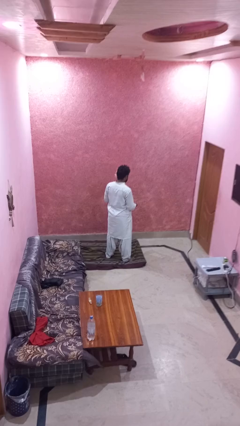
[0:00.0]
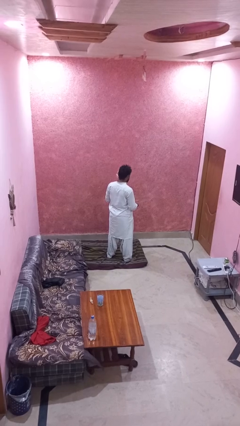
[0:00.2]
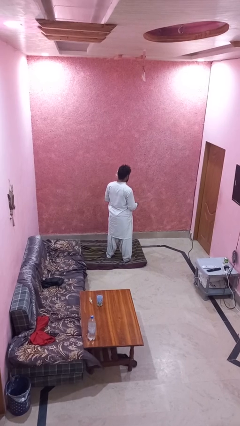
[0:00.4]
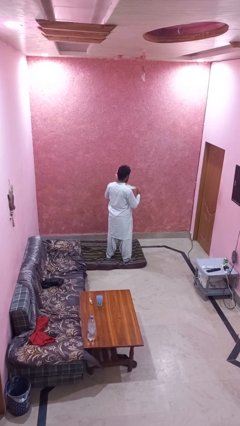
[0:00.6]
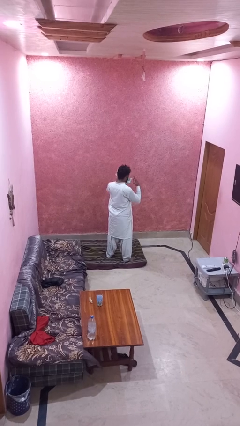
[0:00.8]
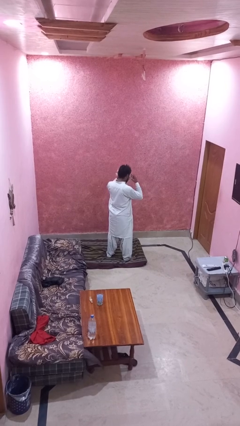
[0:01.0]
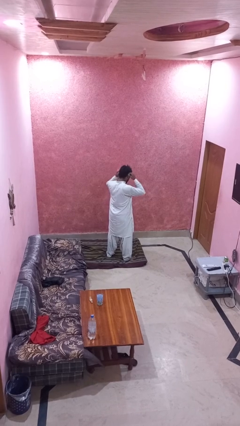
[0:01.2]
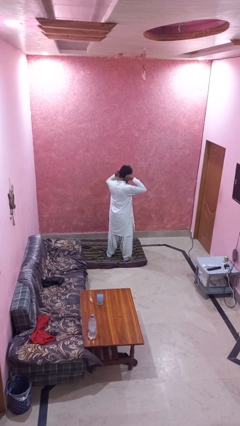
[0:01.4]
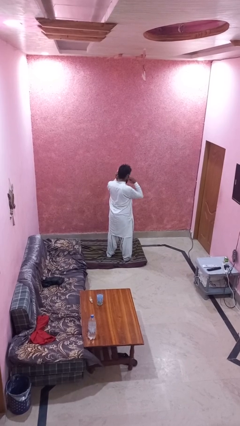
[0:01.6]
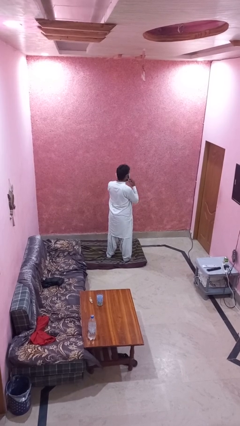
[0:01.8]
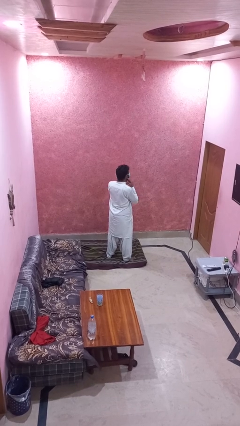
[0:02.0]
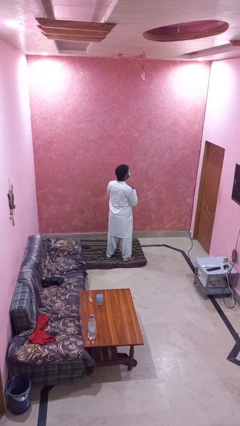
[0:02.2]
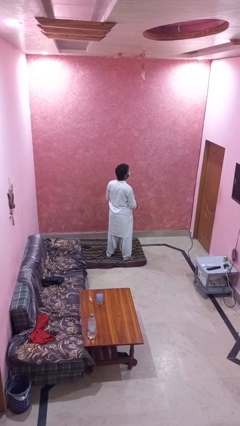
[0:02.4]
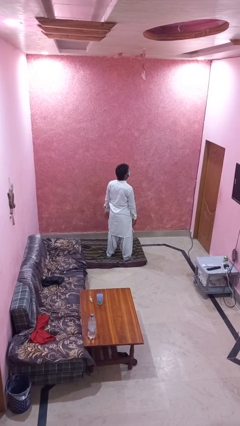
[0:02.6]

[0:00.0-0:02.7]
person puts on facemask

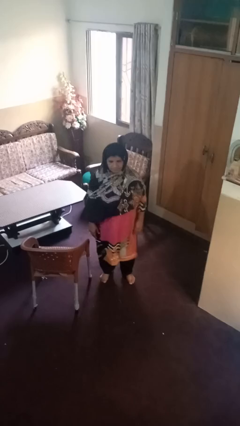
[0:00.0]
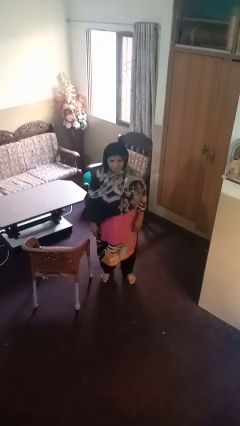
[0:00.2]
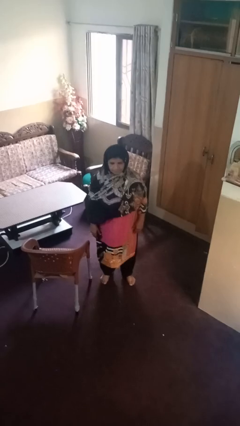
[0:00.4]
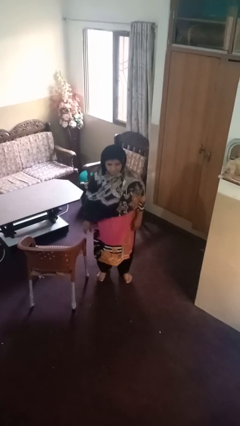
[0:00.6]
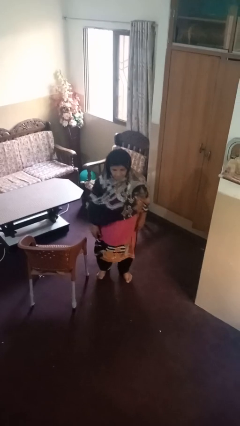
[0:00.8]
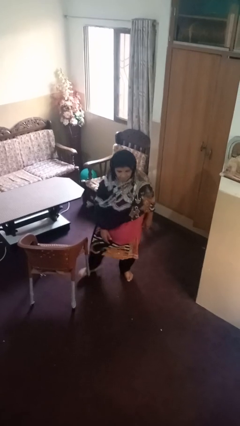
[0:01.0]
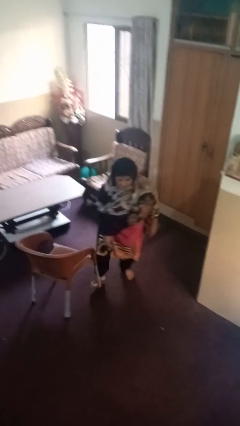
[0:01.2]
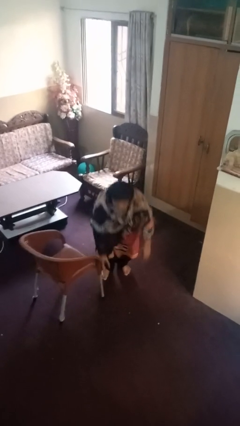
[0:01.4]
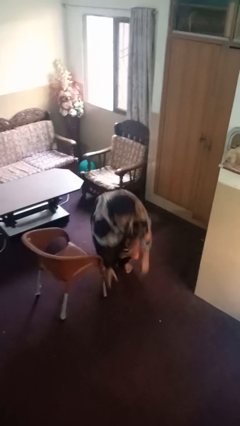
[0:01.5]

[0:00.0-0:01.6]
person trips on object on floor

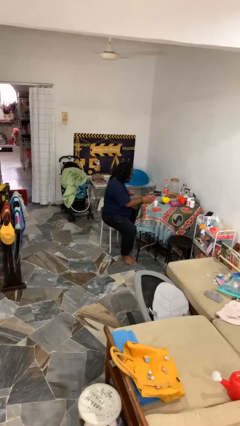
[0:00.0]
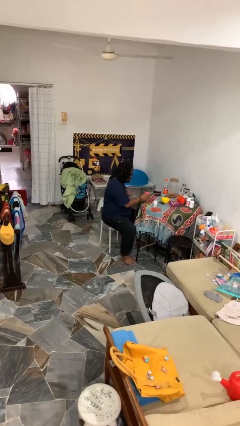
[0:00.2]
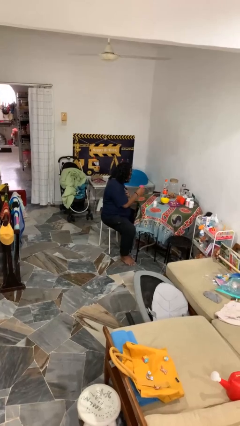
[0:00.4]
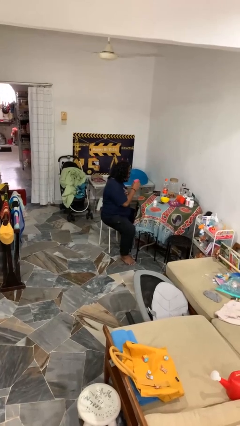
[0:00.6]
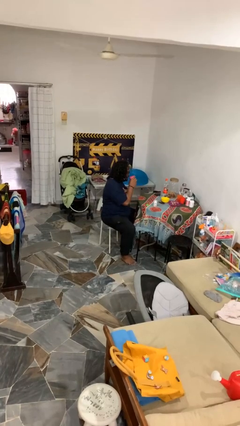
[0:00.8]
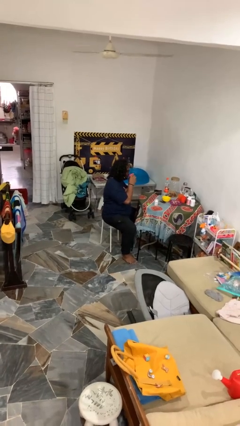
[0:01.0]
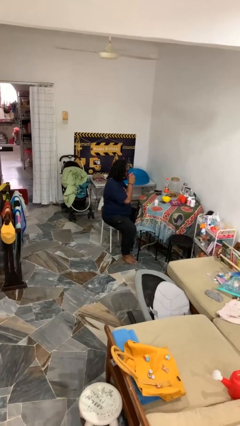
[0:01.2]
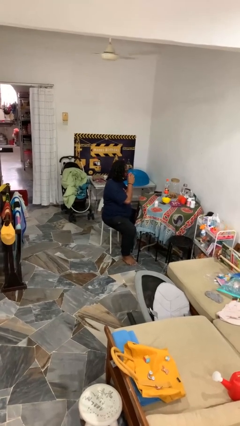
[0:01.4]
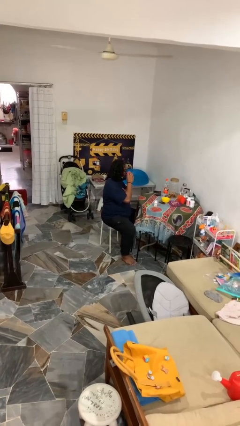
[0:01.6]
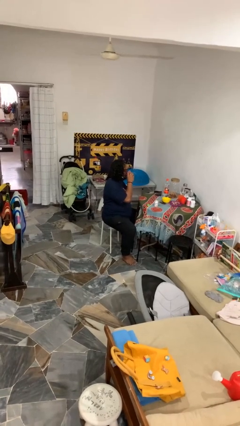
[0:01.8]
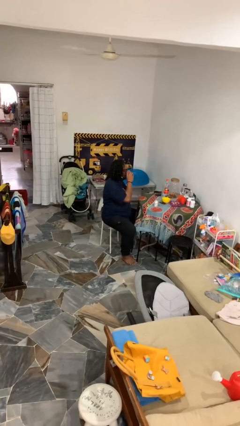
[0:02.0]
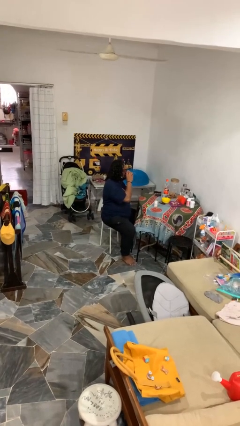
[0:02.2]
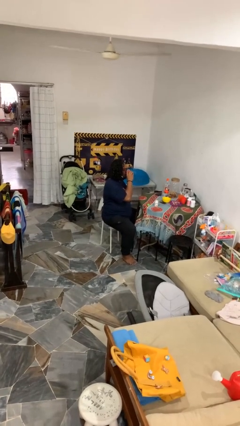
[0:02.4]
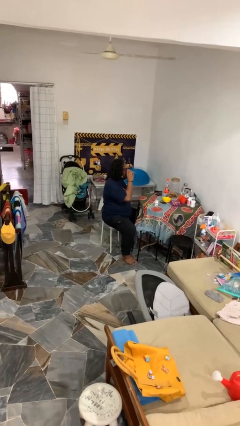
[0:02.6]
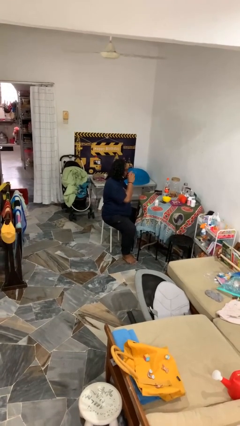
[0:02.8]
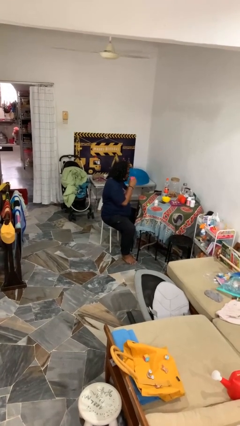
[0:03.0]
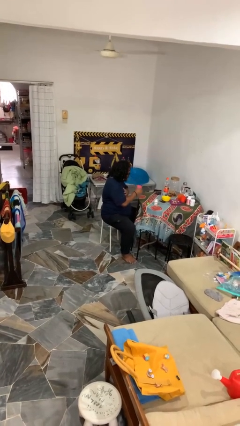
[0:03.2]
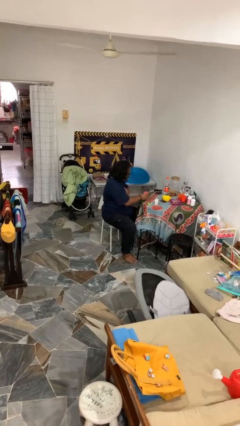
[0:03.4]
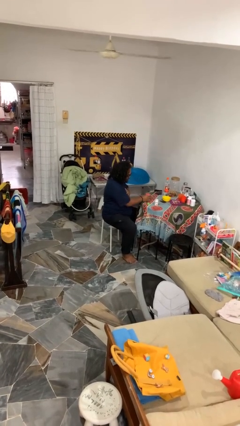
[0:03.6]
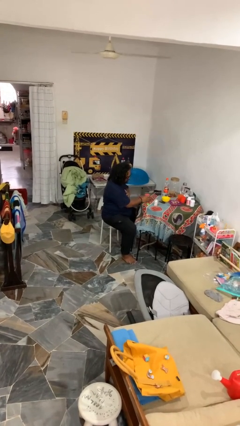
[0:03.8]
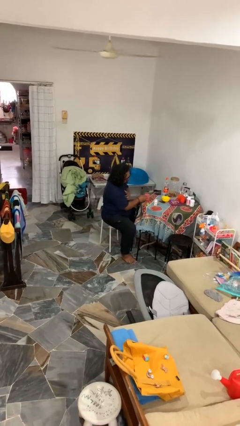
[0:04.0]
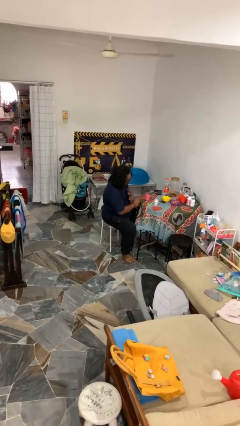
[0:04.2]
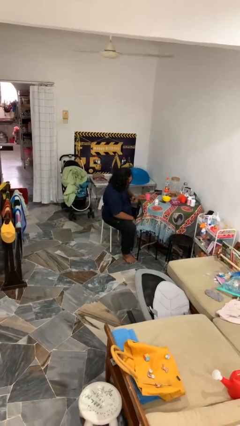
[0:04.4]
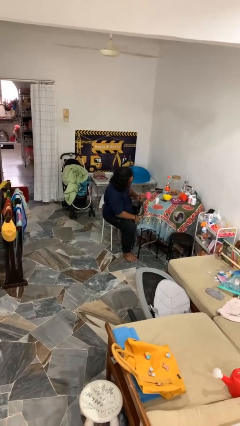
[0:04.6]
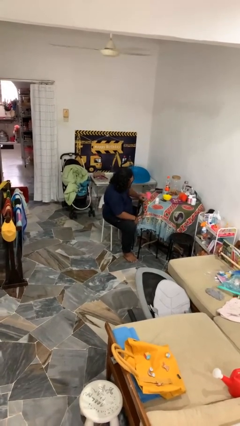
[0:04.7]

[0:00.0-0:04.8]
person drinks from cup

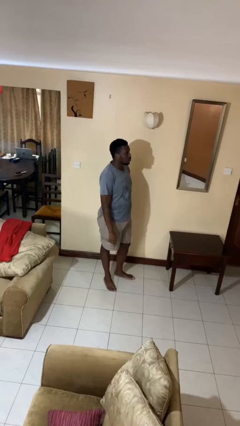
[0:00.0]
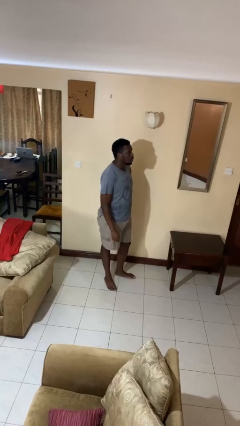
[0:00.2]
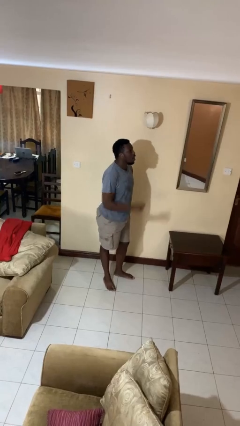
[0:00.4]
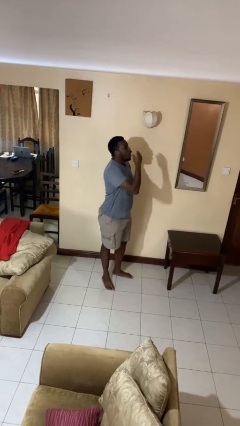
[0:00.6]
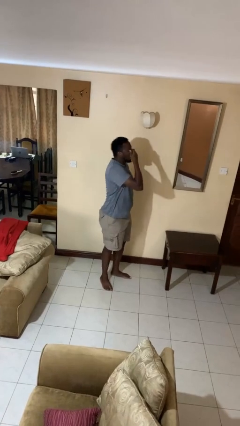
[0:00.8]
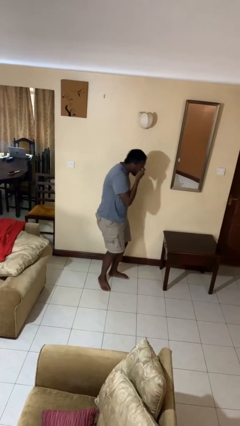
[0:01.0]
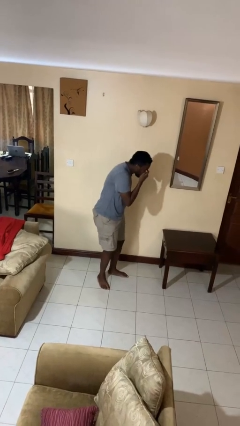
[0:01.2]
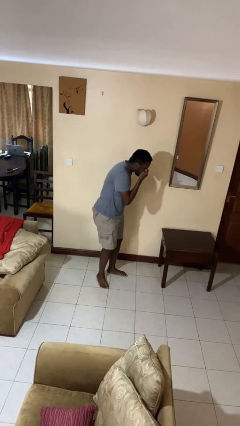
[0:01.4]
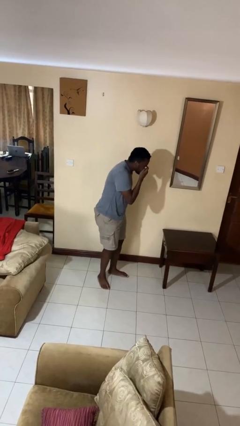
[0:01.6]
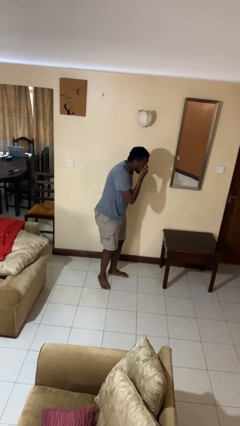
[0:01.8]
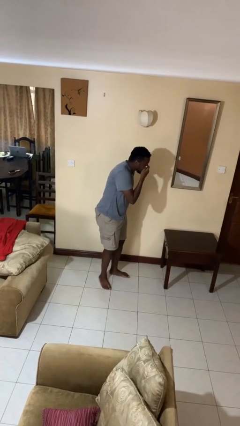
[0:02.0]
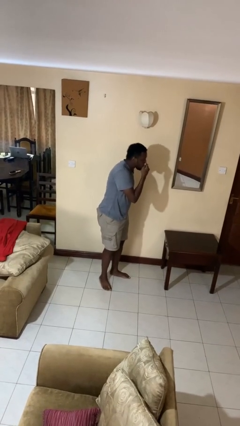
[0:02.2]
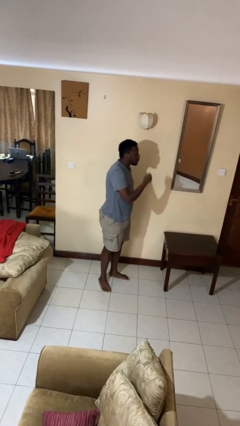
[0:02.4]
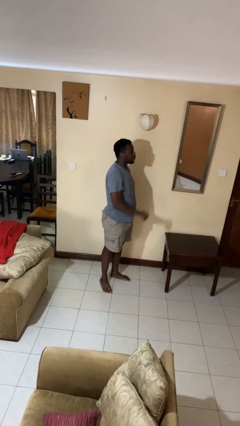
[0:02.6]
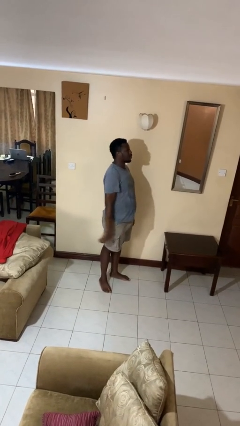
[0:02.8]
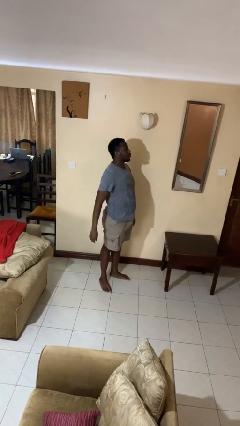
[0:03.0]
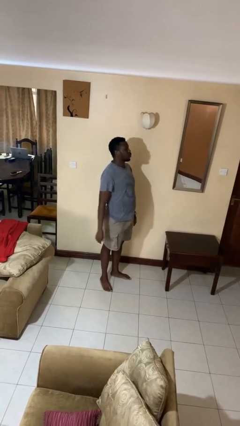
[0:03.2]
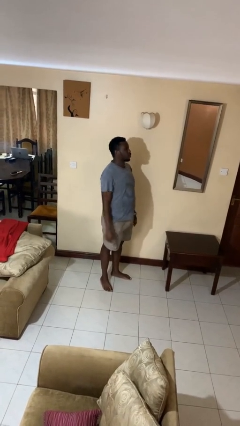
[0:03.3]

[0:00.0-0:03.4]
person sneezes into hand

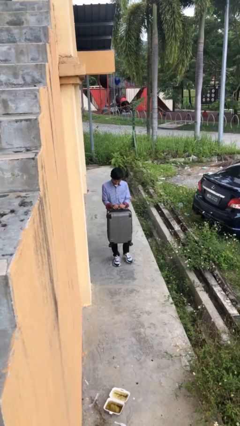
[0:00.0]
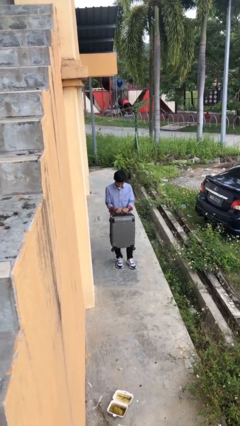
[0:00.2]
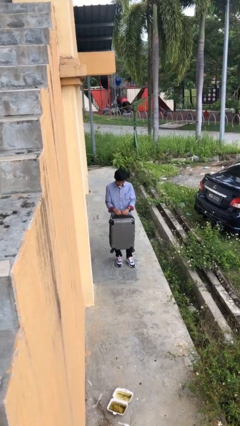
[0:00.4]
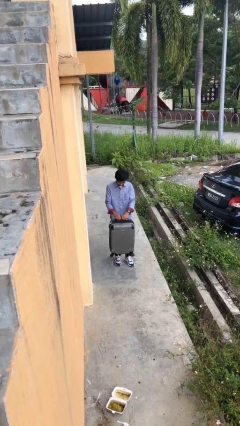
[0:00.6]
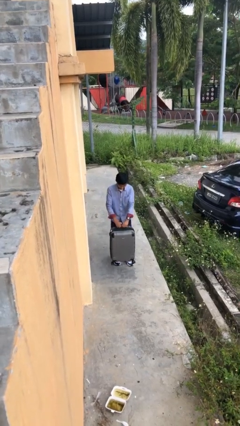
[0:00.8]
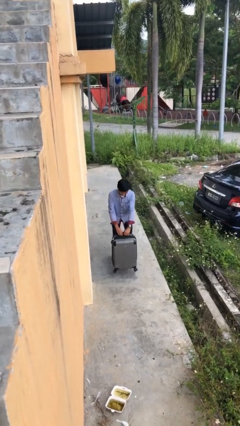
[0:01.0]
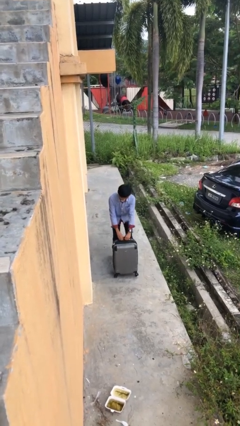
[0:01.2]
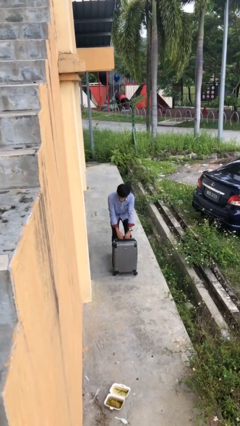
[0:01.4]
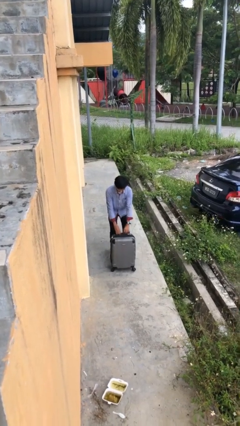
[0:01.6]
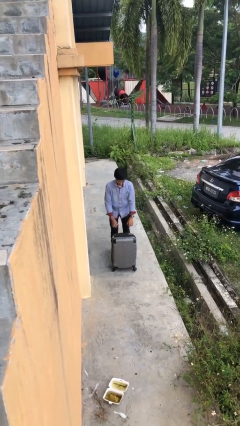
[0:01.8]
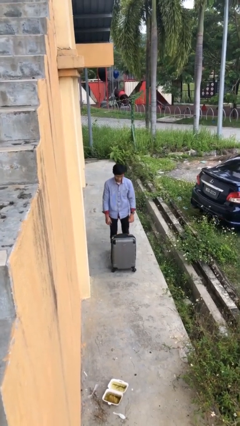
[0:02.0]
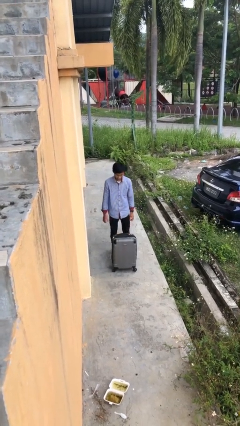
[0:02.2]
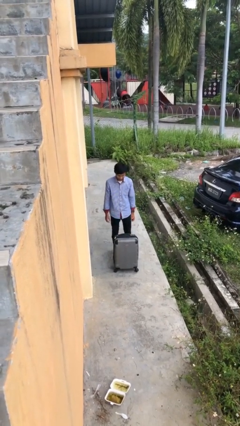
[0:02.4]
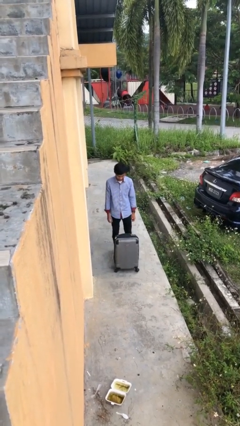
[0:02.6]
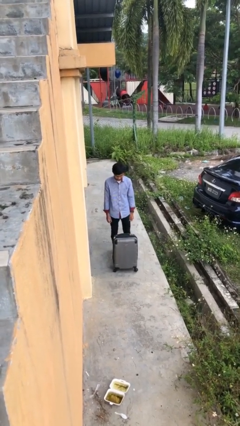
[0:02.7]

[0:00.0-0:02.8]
person puts down object on floor

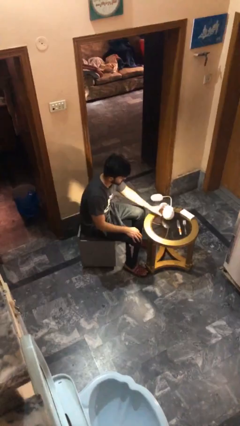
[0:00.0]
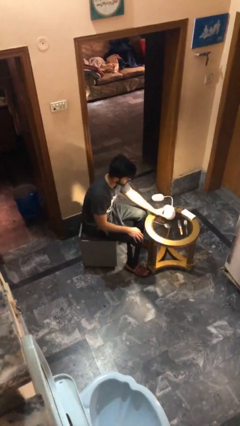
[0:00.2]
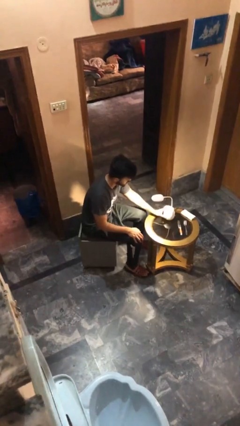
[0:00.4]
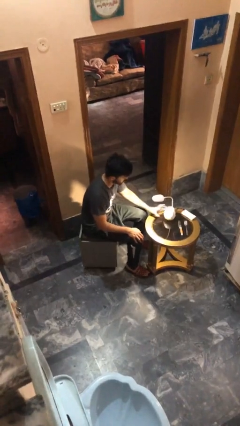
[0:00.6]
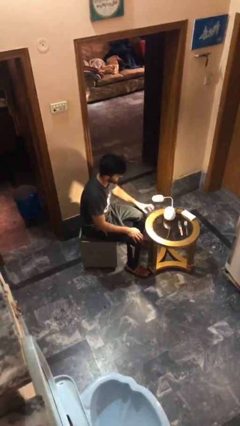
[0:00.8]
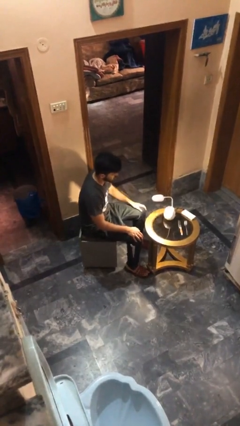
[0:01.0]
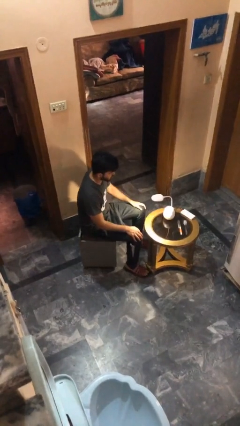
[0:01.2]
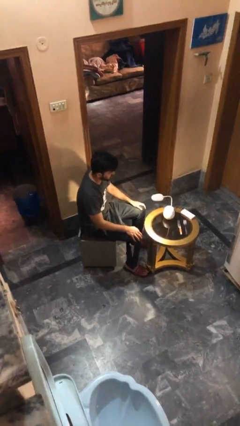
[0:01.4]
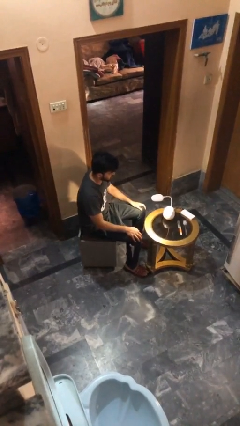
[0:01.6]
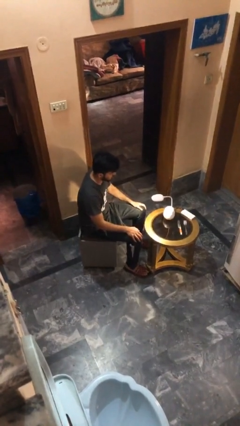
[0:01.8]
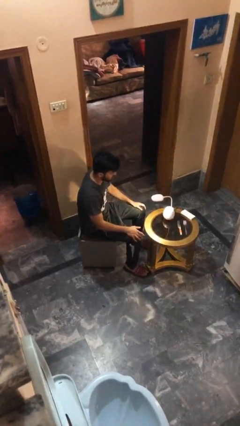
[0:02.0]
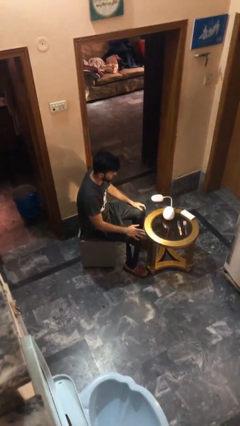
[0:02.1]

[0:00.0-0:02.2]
person turns off lamp
